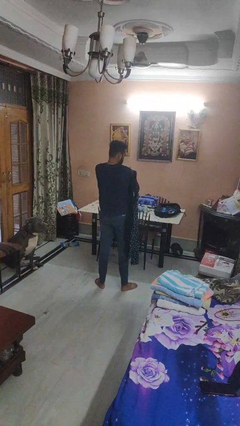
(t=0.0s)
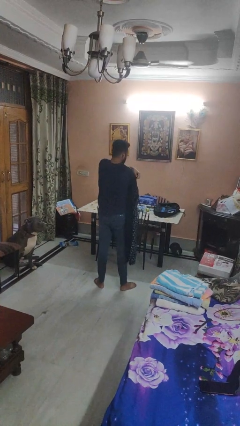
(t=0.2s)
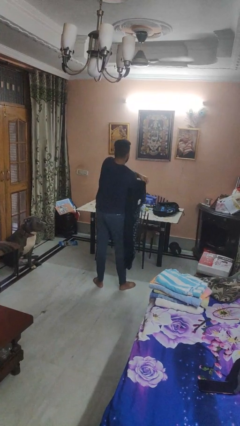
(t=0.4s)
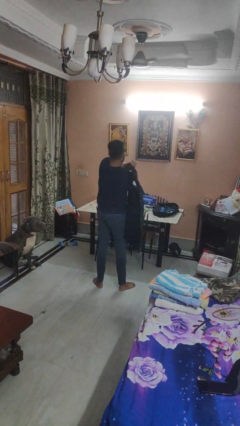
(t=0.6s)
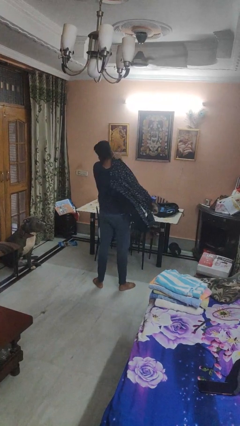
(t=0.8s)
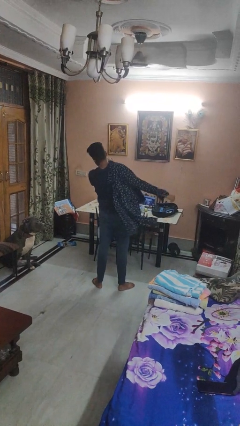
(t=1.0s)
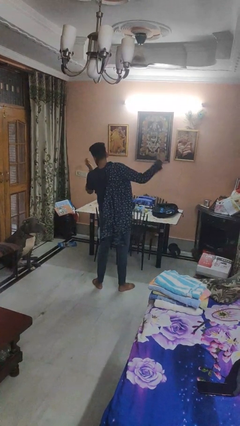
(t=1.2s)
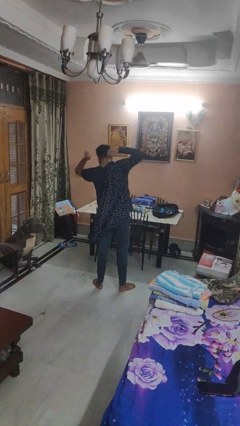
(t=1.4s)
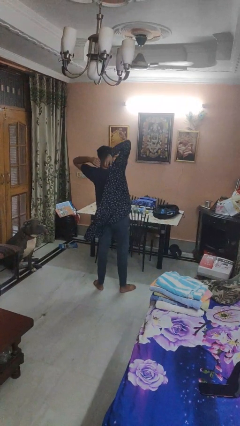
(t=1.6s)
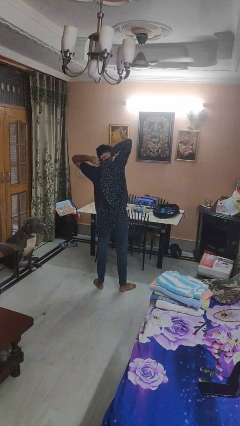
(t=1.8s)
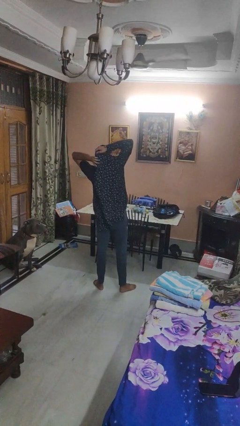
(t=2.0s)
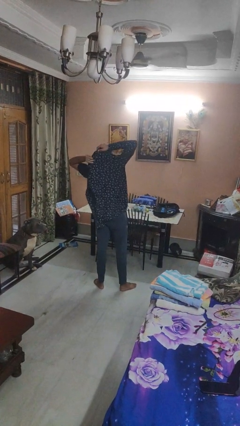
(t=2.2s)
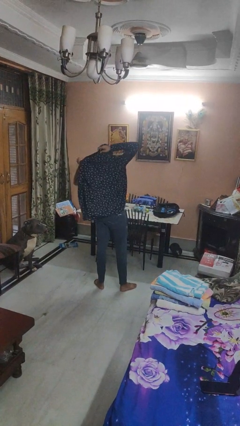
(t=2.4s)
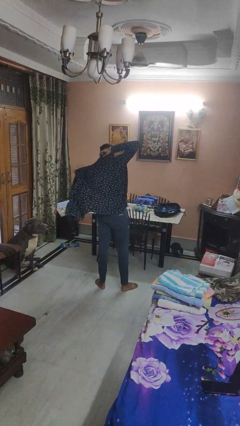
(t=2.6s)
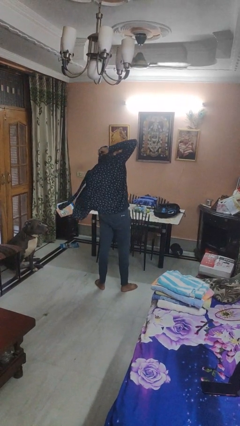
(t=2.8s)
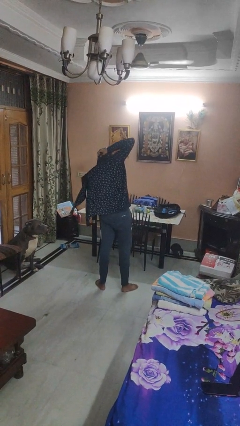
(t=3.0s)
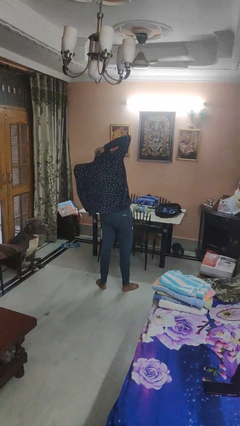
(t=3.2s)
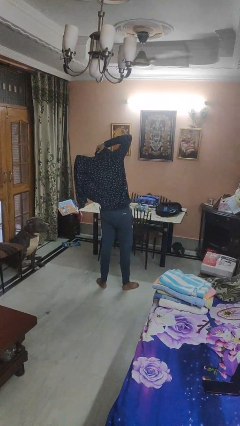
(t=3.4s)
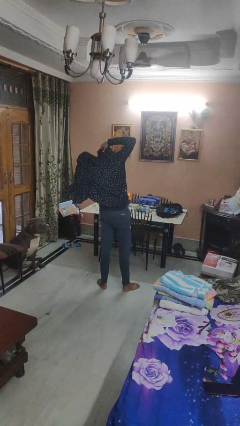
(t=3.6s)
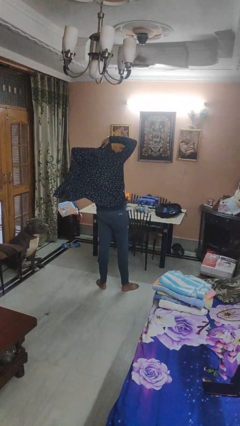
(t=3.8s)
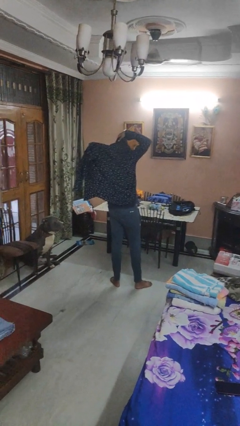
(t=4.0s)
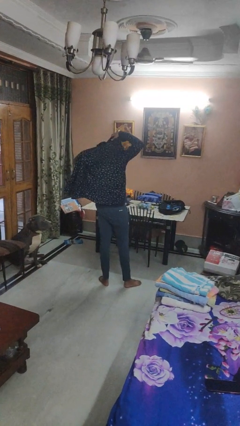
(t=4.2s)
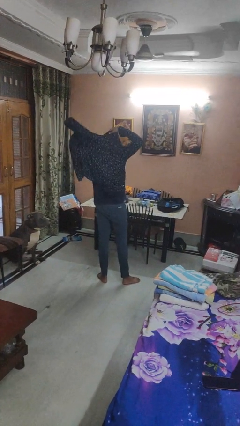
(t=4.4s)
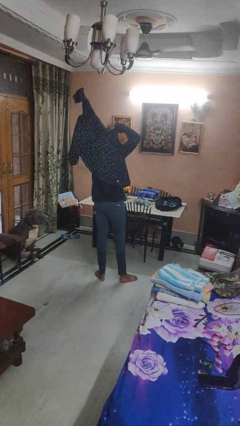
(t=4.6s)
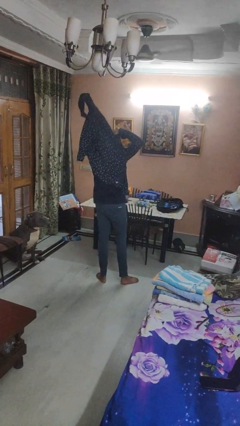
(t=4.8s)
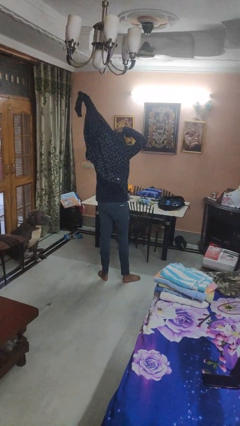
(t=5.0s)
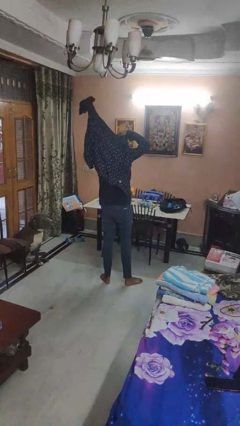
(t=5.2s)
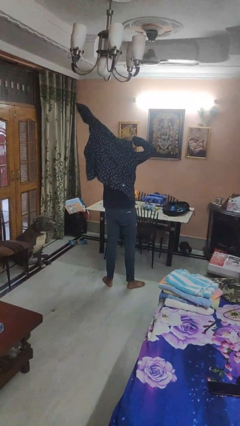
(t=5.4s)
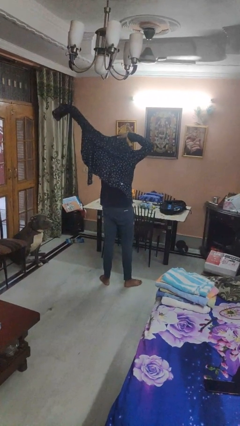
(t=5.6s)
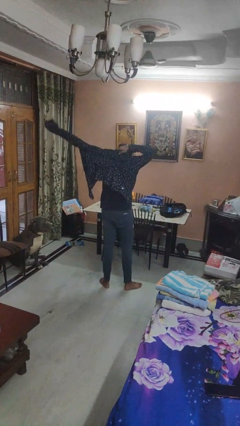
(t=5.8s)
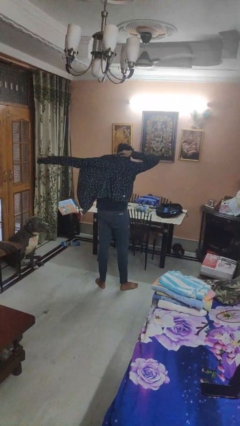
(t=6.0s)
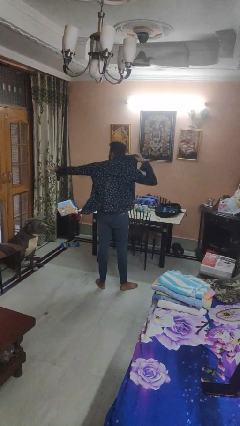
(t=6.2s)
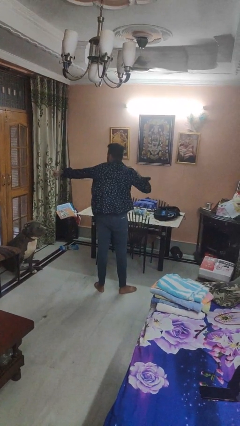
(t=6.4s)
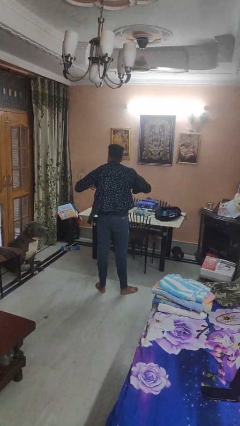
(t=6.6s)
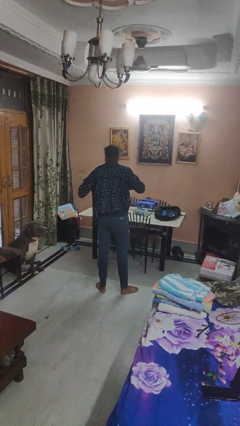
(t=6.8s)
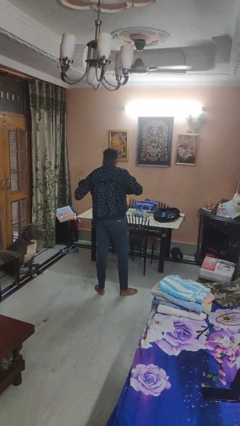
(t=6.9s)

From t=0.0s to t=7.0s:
person puts on shirt

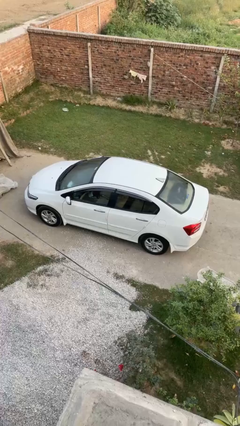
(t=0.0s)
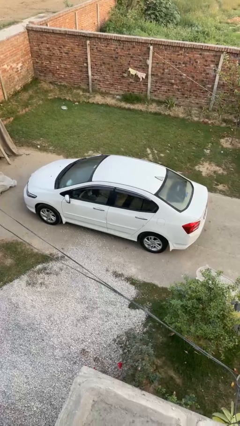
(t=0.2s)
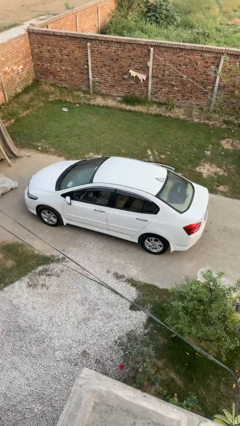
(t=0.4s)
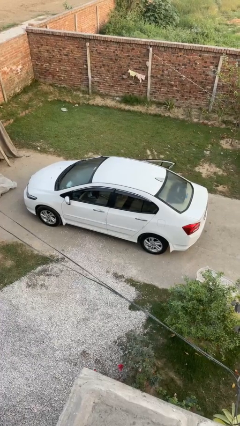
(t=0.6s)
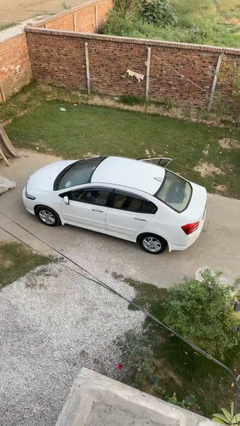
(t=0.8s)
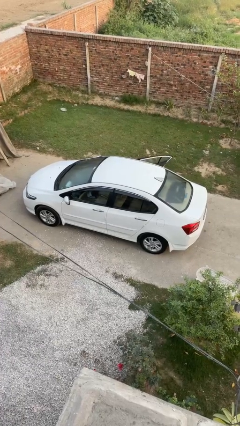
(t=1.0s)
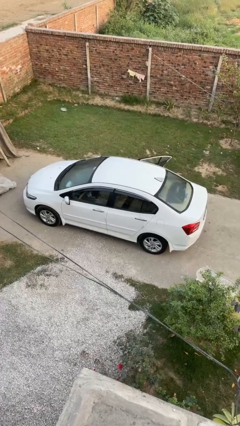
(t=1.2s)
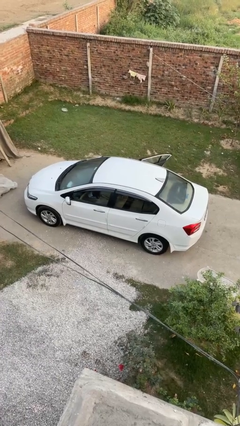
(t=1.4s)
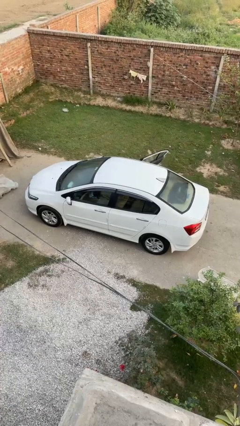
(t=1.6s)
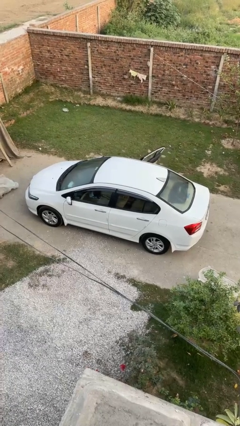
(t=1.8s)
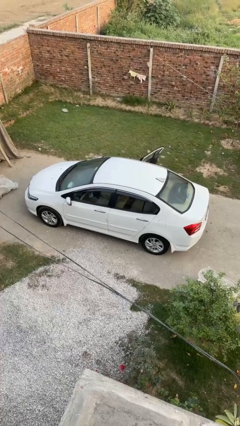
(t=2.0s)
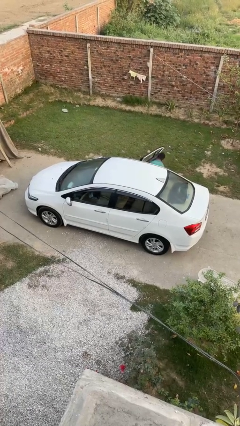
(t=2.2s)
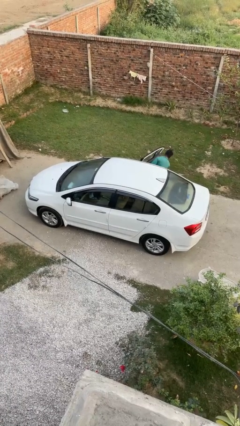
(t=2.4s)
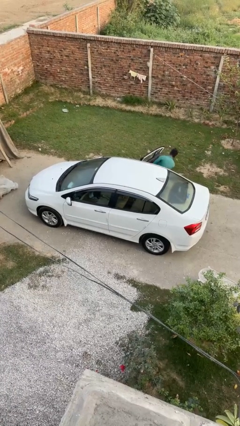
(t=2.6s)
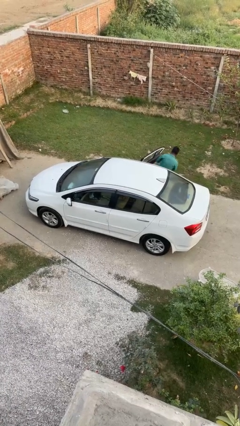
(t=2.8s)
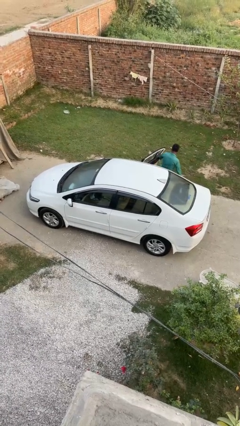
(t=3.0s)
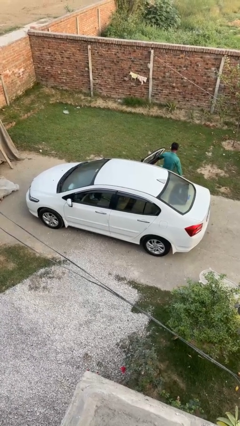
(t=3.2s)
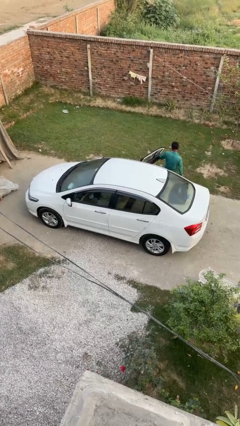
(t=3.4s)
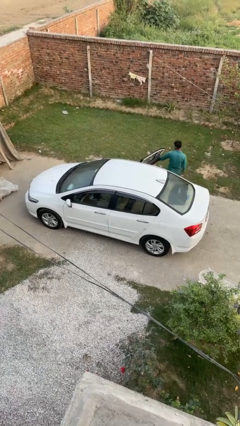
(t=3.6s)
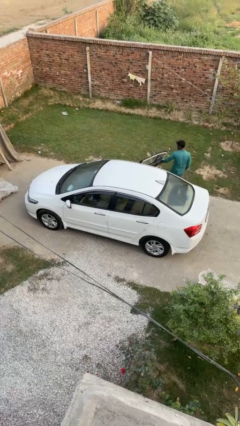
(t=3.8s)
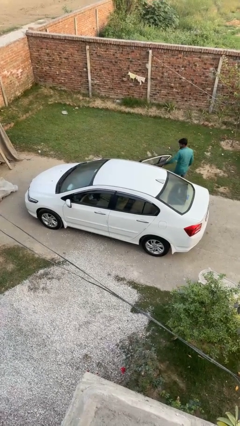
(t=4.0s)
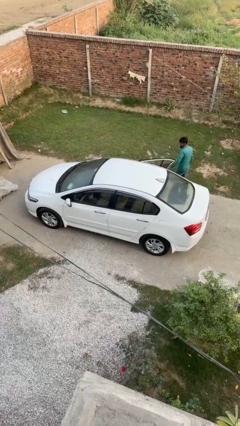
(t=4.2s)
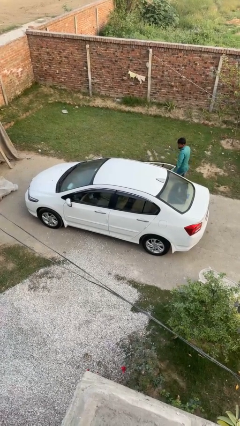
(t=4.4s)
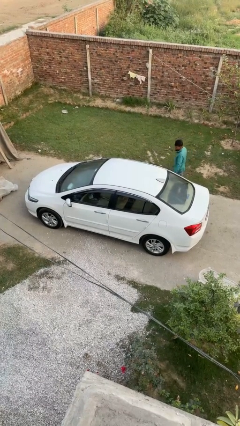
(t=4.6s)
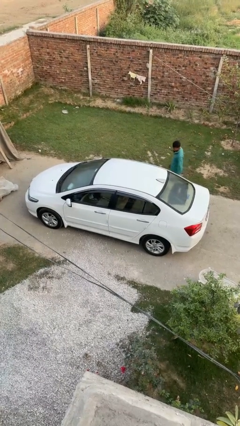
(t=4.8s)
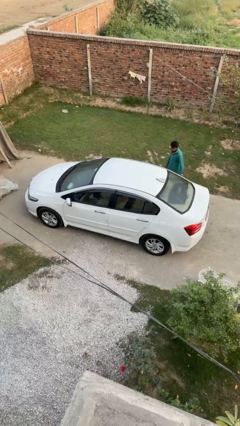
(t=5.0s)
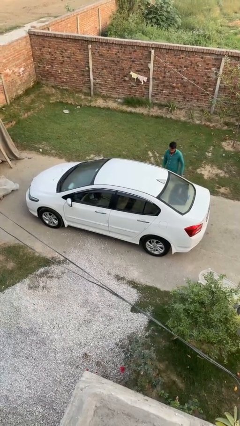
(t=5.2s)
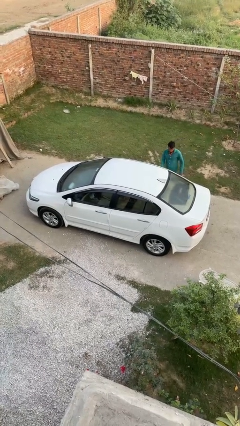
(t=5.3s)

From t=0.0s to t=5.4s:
car drops off person

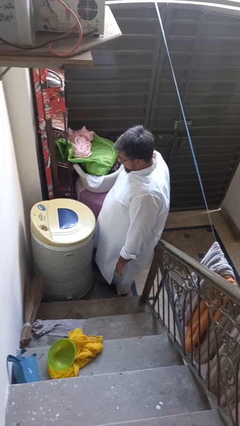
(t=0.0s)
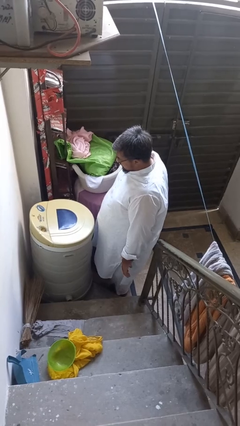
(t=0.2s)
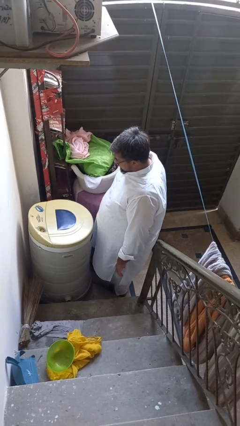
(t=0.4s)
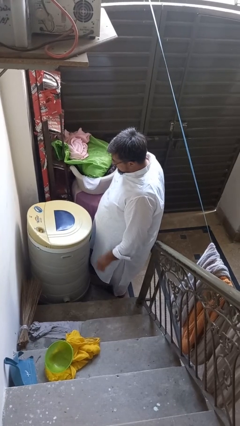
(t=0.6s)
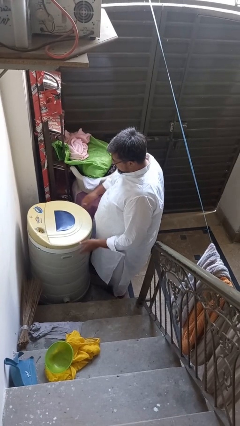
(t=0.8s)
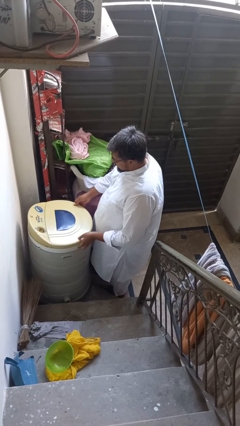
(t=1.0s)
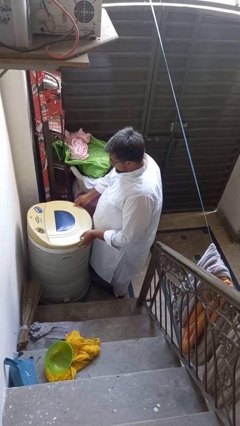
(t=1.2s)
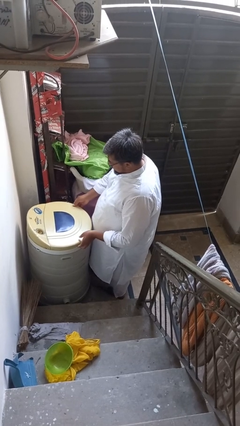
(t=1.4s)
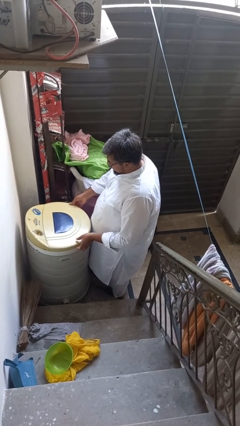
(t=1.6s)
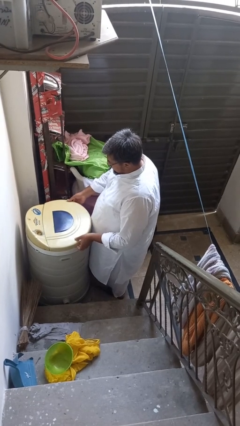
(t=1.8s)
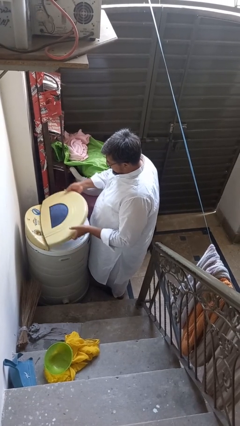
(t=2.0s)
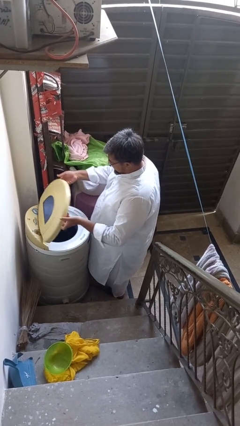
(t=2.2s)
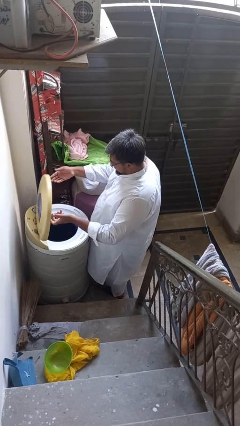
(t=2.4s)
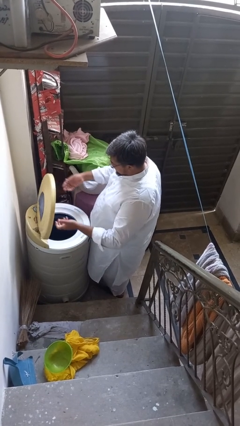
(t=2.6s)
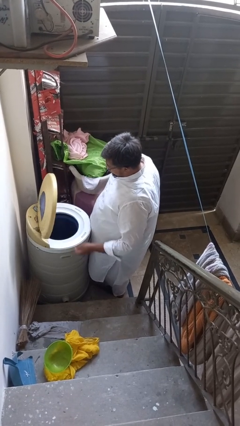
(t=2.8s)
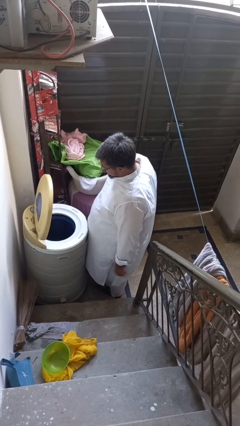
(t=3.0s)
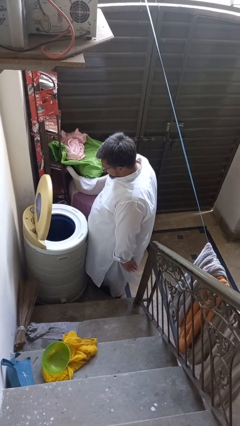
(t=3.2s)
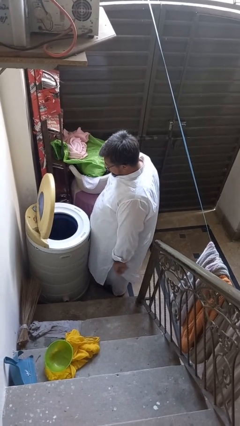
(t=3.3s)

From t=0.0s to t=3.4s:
person opens clothes washer

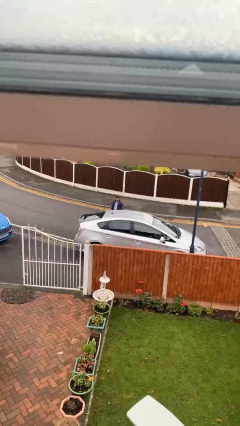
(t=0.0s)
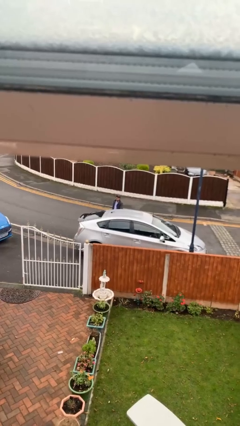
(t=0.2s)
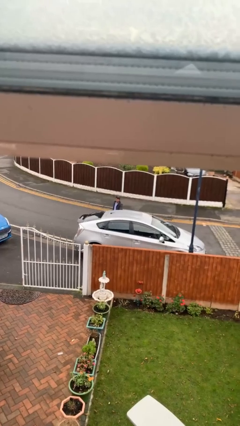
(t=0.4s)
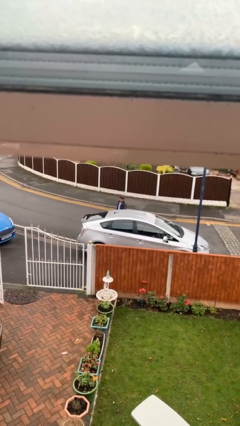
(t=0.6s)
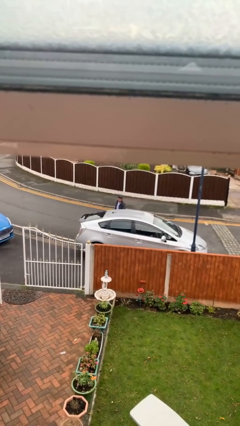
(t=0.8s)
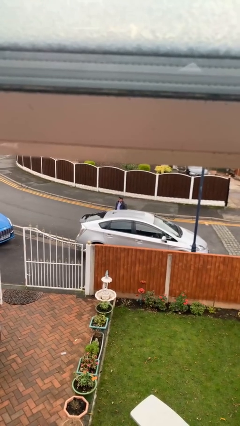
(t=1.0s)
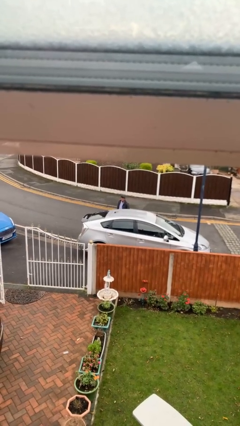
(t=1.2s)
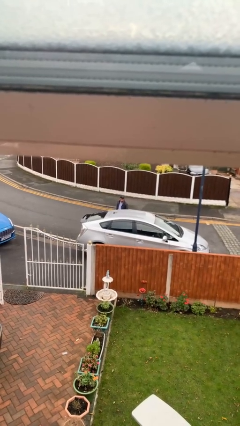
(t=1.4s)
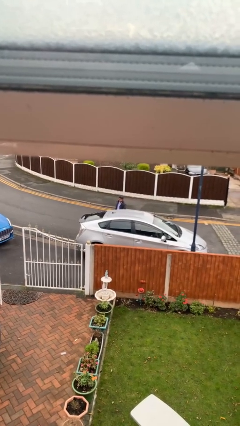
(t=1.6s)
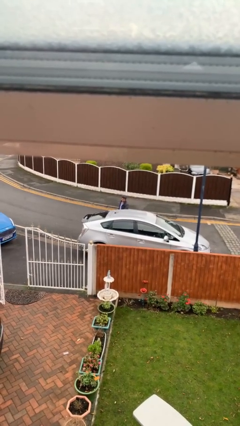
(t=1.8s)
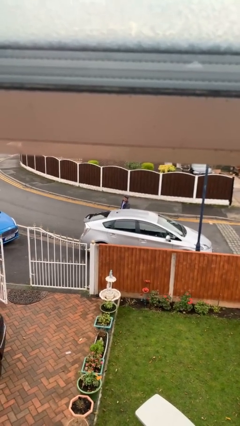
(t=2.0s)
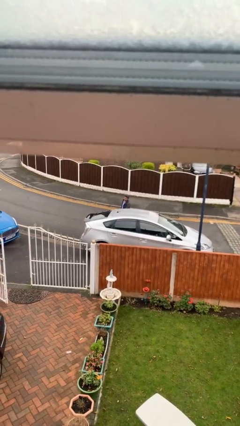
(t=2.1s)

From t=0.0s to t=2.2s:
person closes car door
